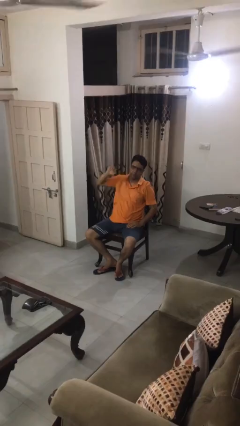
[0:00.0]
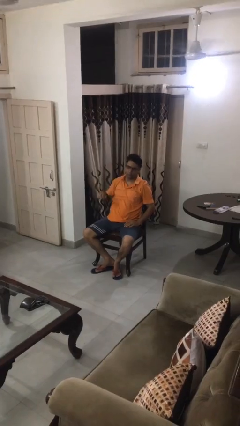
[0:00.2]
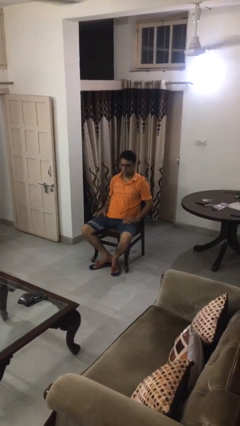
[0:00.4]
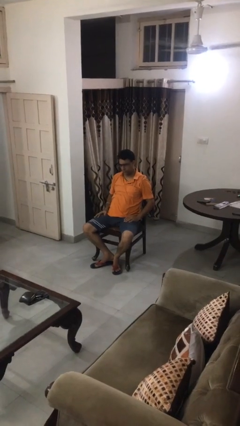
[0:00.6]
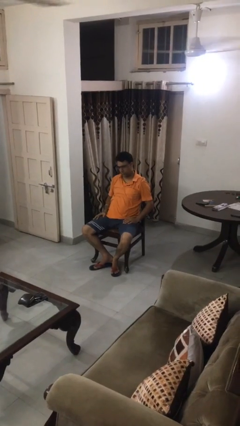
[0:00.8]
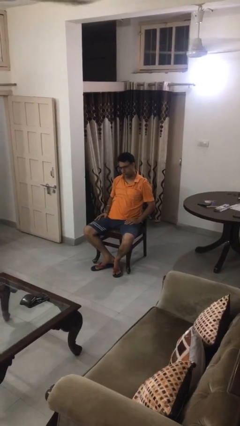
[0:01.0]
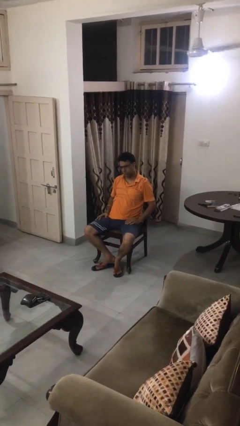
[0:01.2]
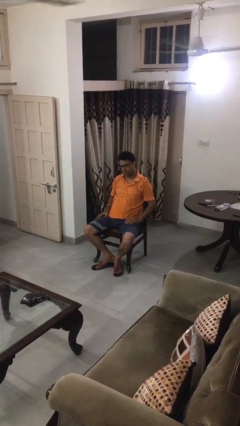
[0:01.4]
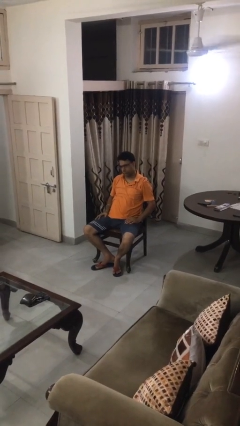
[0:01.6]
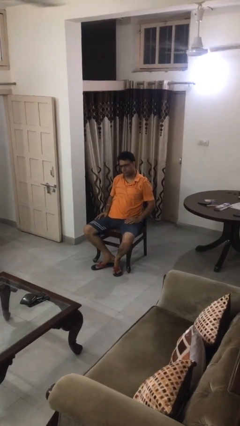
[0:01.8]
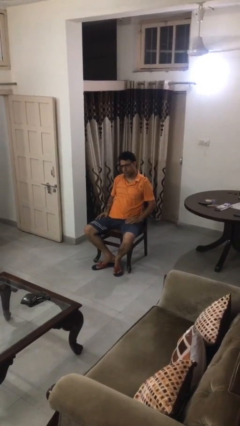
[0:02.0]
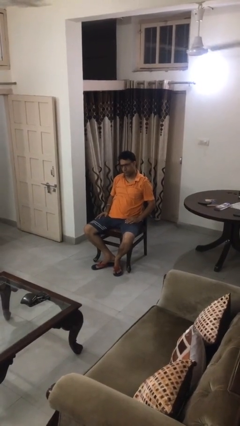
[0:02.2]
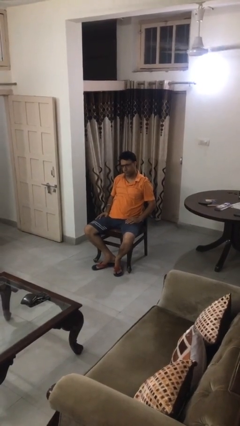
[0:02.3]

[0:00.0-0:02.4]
person gestures lower hand

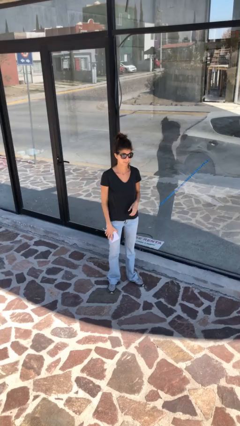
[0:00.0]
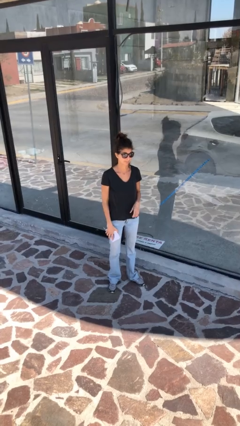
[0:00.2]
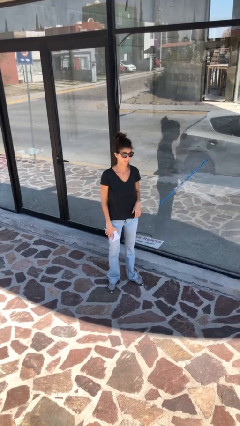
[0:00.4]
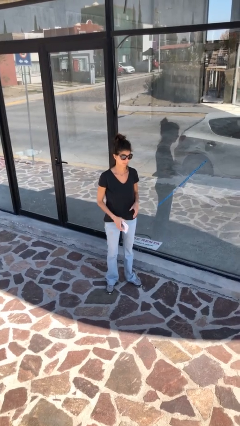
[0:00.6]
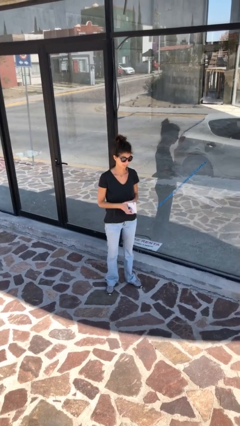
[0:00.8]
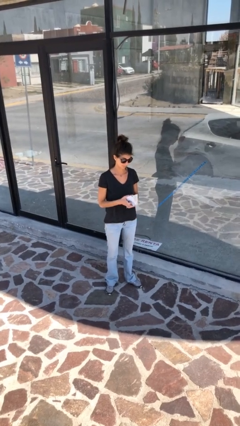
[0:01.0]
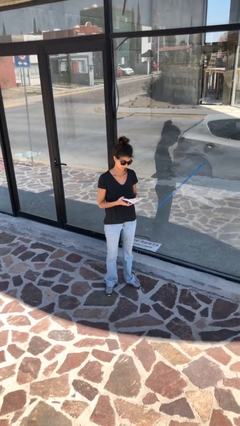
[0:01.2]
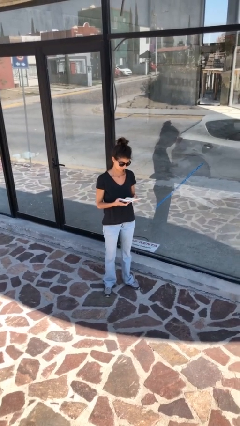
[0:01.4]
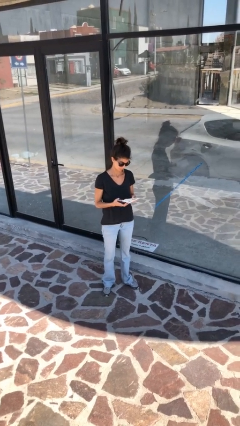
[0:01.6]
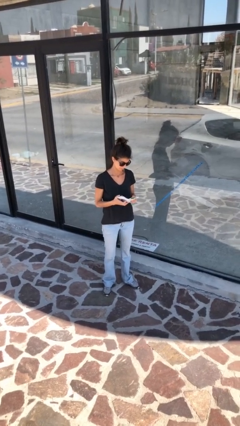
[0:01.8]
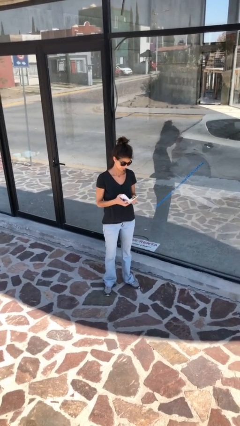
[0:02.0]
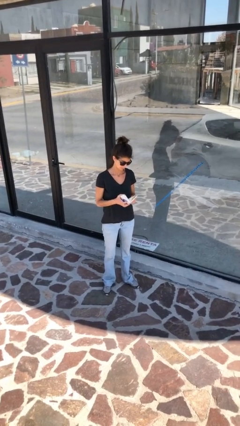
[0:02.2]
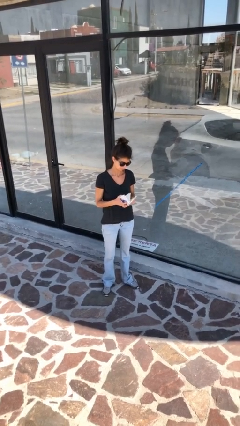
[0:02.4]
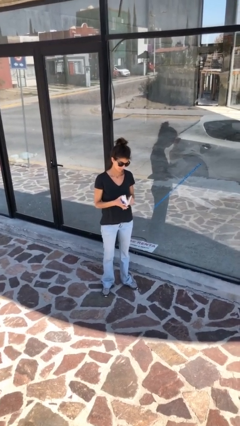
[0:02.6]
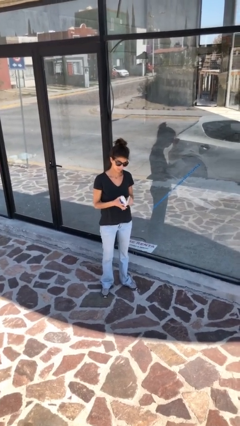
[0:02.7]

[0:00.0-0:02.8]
person reads document

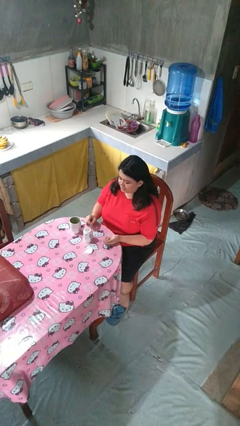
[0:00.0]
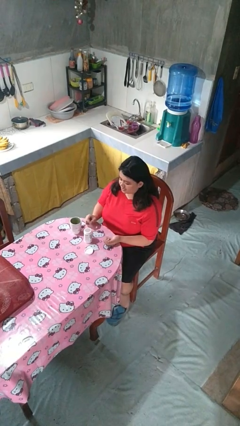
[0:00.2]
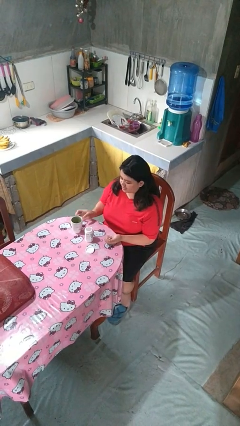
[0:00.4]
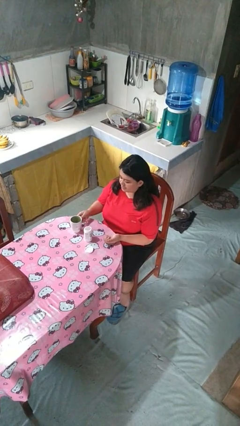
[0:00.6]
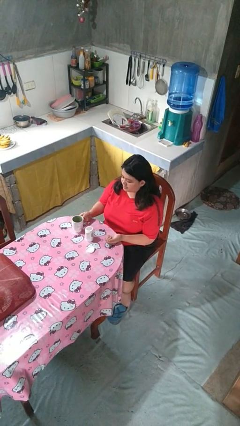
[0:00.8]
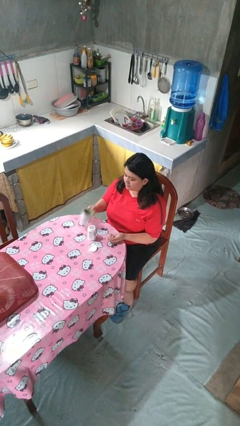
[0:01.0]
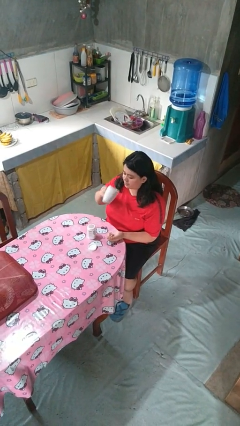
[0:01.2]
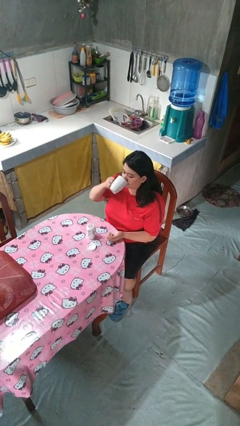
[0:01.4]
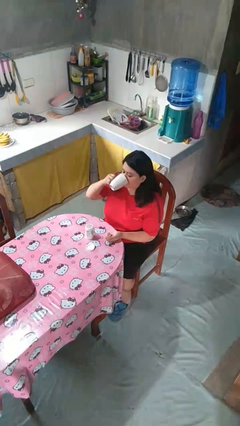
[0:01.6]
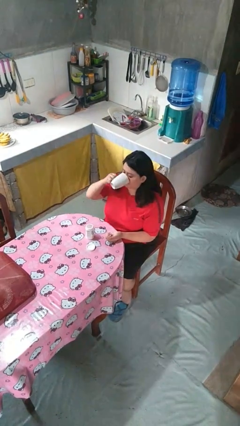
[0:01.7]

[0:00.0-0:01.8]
person drinks from cup

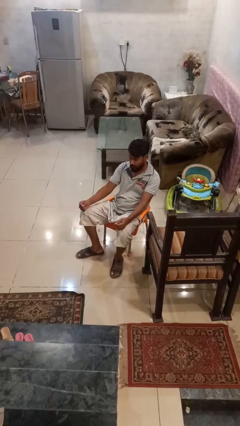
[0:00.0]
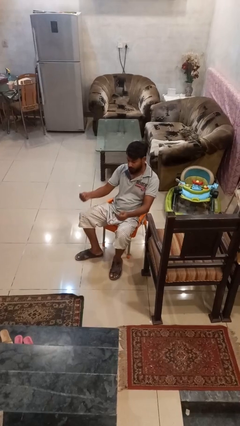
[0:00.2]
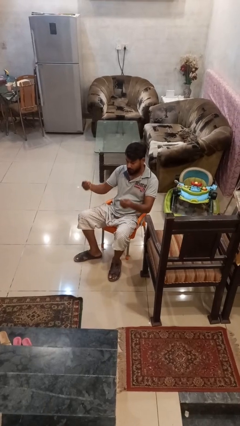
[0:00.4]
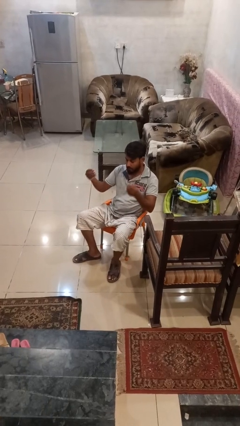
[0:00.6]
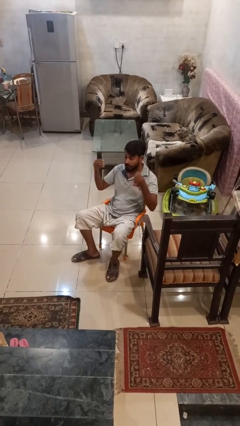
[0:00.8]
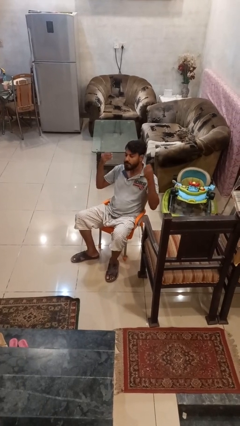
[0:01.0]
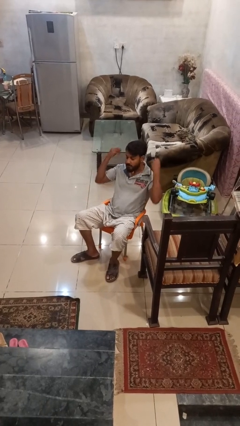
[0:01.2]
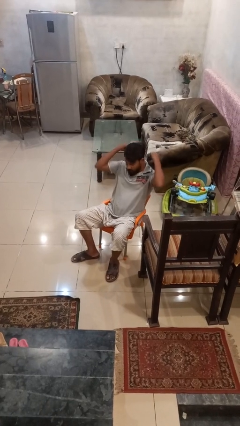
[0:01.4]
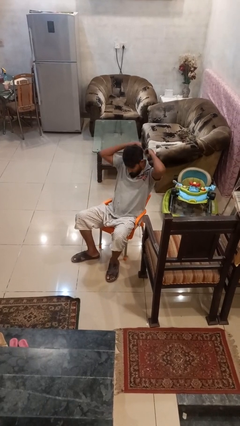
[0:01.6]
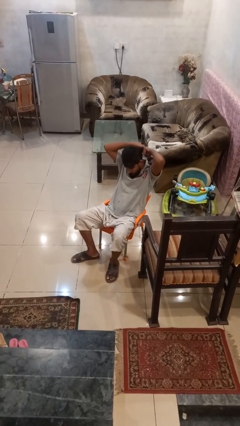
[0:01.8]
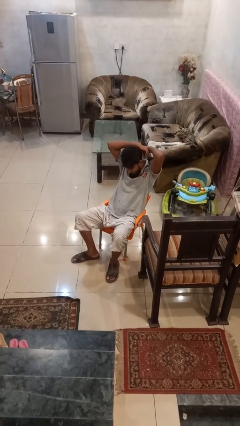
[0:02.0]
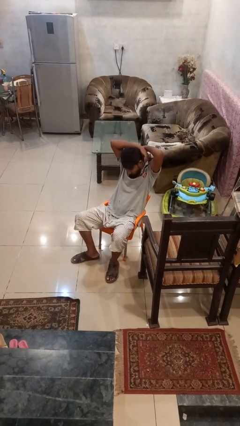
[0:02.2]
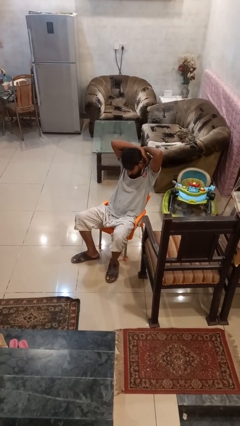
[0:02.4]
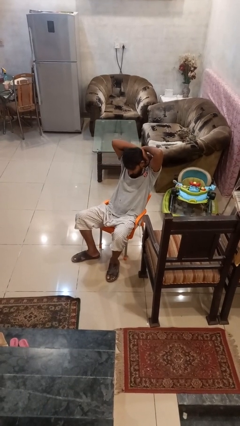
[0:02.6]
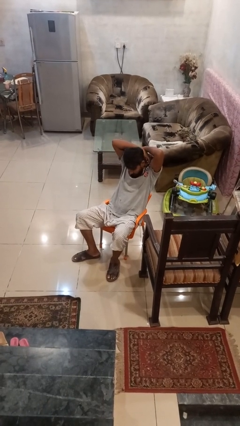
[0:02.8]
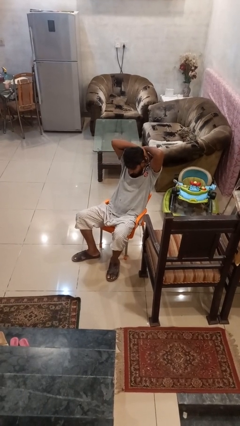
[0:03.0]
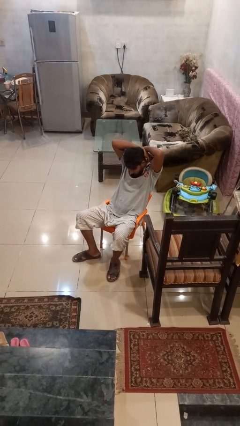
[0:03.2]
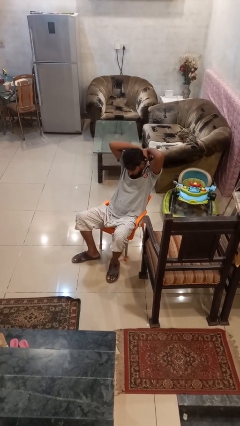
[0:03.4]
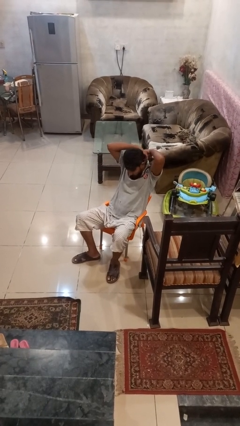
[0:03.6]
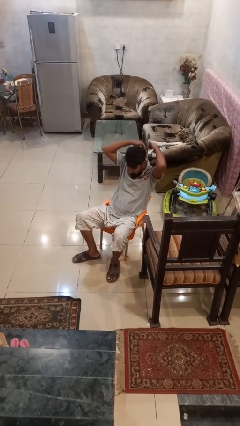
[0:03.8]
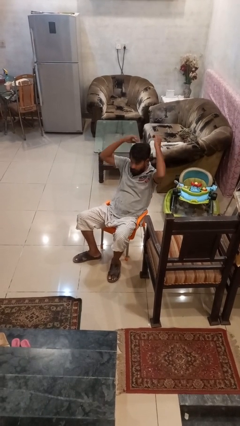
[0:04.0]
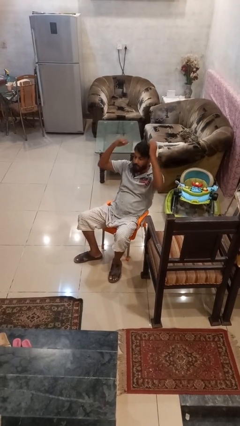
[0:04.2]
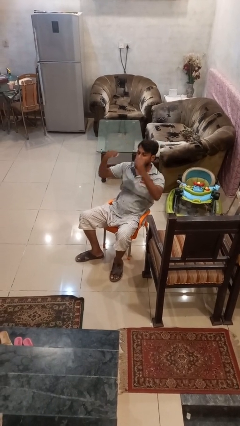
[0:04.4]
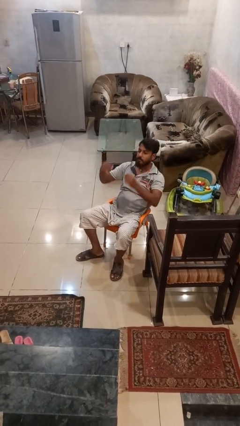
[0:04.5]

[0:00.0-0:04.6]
person puts on necklace

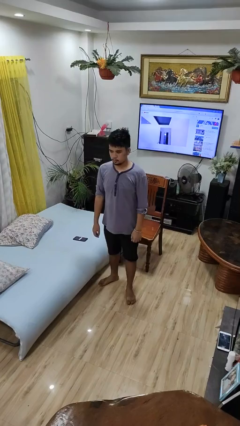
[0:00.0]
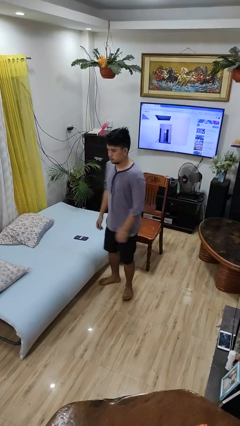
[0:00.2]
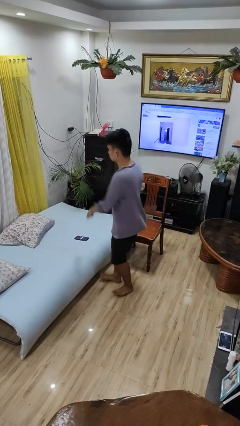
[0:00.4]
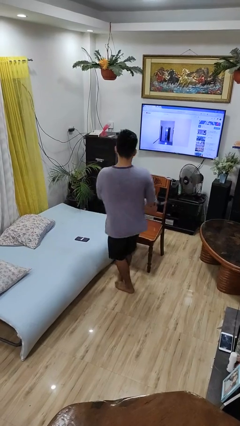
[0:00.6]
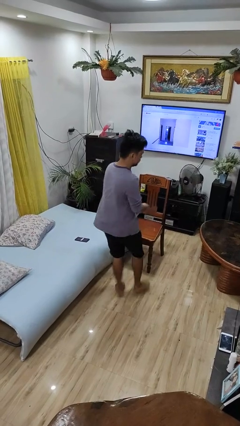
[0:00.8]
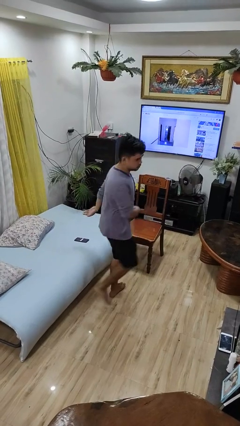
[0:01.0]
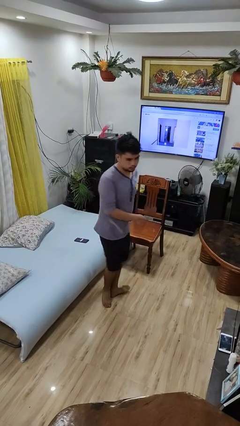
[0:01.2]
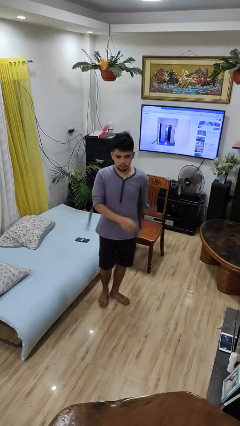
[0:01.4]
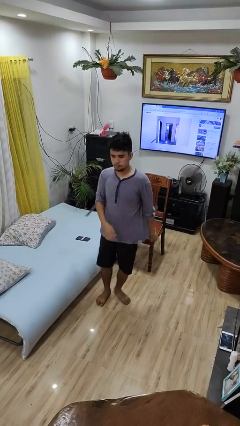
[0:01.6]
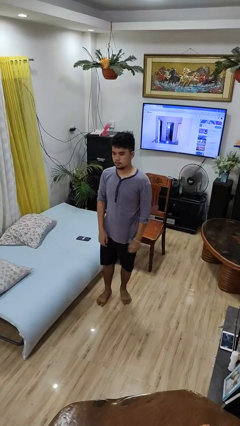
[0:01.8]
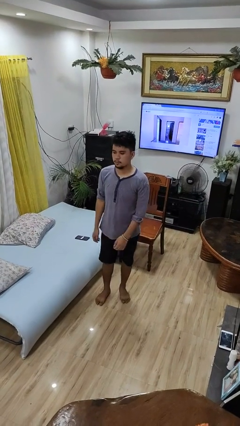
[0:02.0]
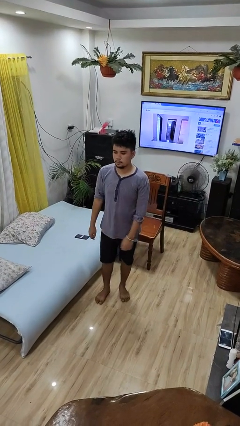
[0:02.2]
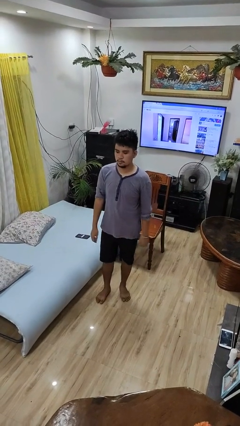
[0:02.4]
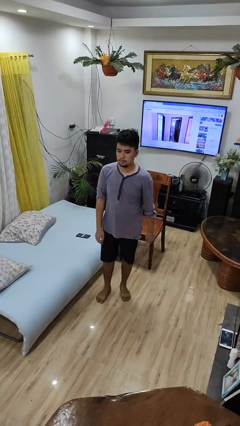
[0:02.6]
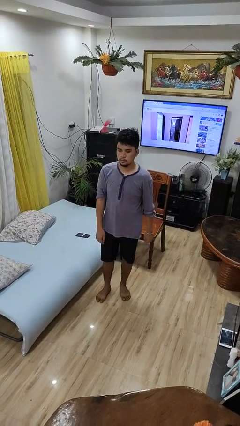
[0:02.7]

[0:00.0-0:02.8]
person twirls

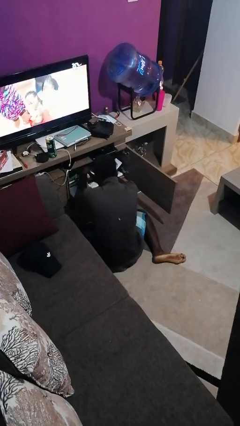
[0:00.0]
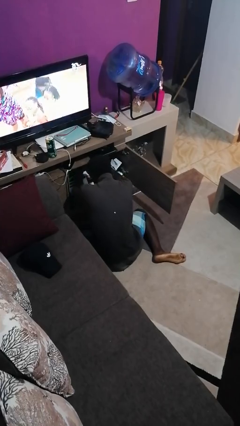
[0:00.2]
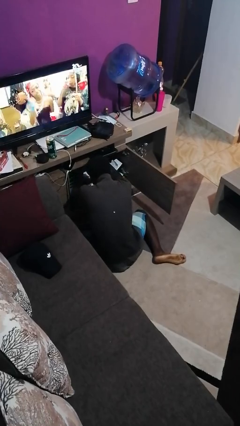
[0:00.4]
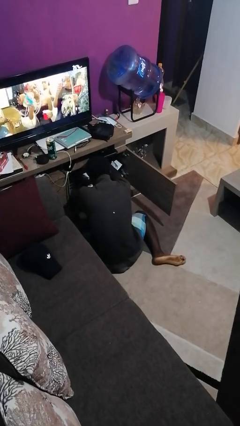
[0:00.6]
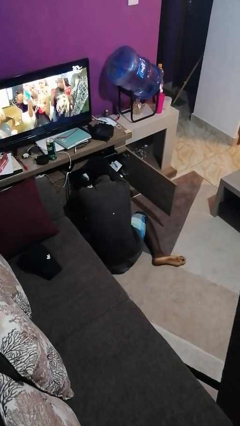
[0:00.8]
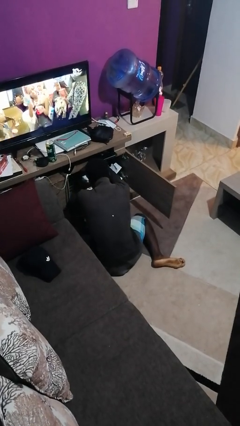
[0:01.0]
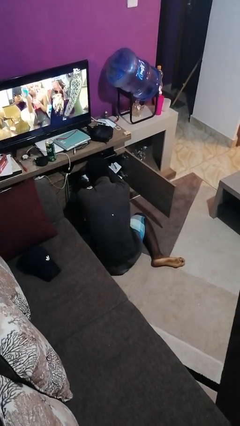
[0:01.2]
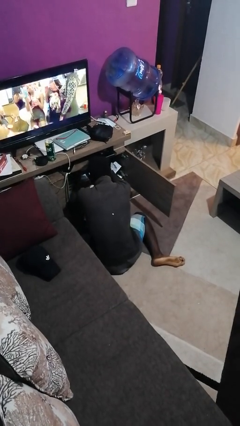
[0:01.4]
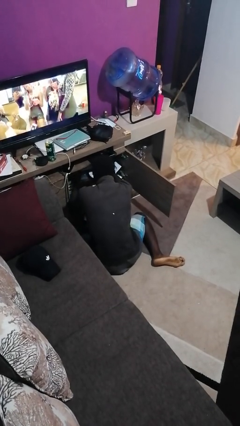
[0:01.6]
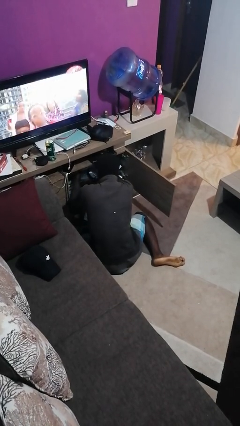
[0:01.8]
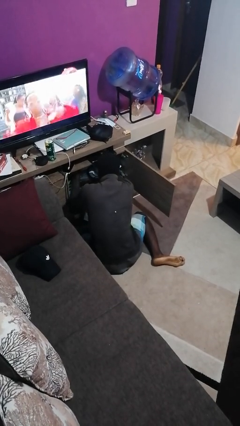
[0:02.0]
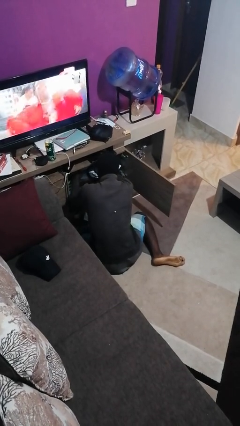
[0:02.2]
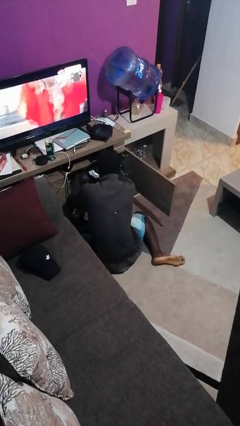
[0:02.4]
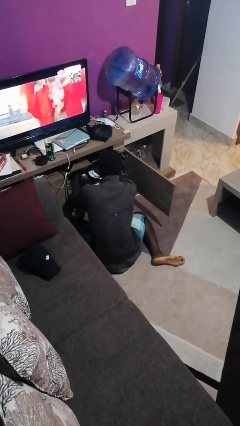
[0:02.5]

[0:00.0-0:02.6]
person searches in cabinet

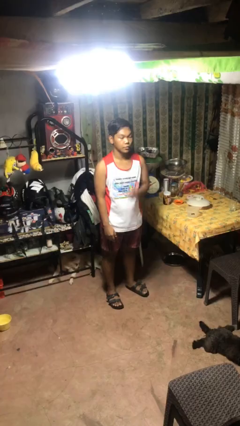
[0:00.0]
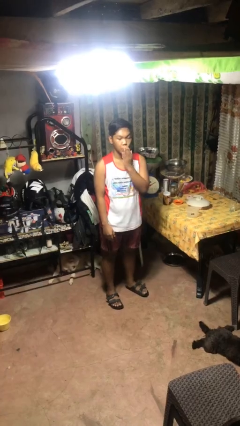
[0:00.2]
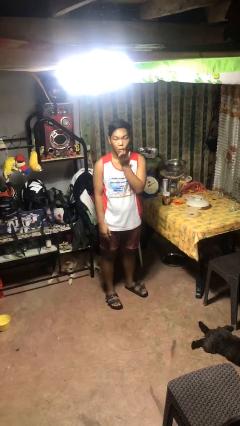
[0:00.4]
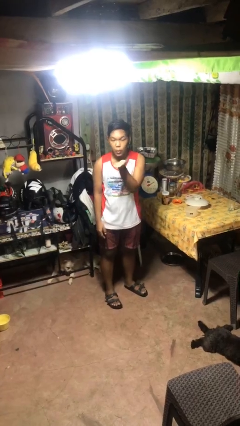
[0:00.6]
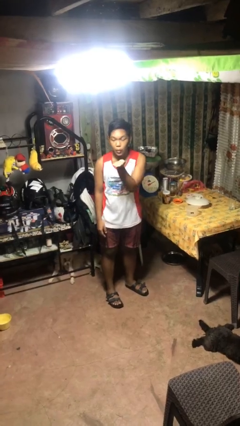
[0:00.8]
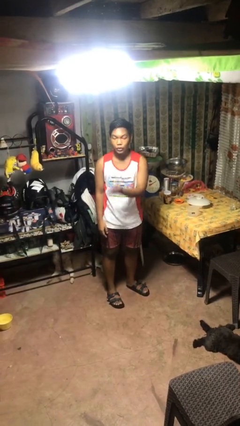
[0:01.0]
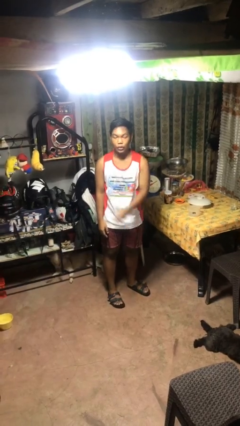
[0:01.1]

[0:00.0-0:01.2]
person gestures blow kiss
